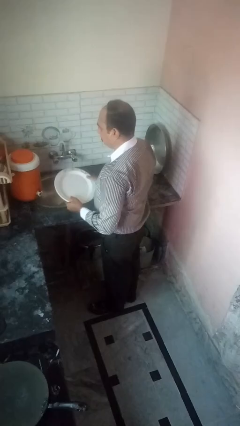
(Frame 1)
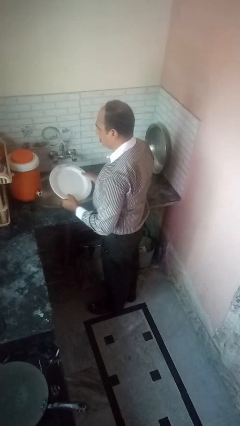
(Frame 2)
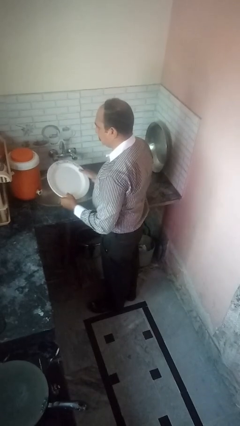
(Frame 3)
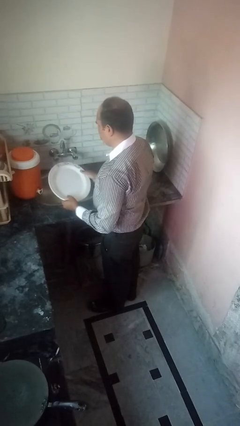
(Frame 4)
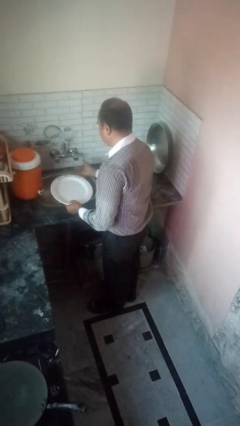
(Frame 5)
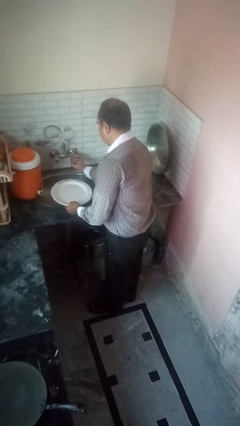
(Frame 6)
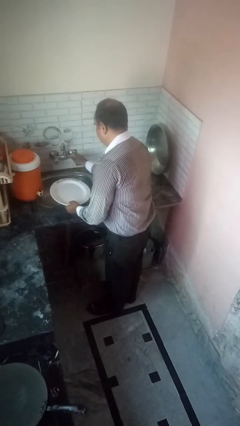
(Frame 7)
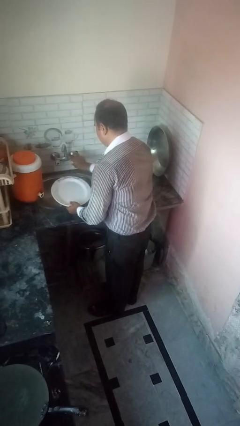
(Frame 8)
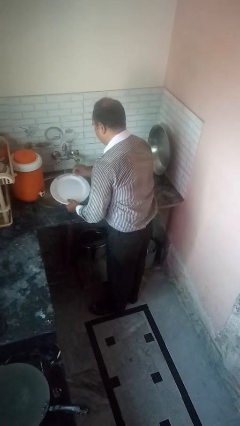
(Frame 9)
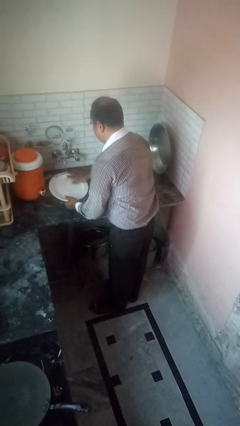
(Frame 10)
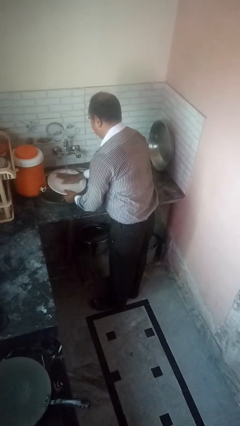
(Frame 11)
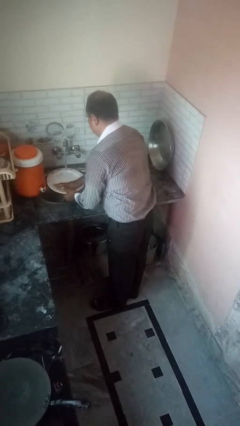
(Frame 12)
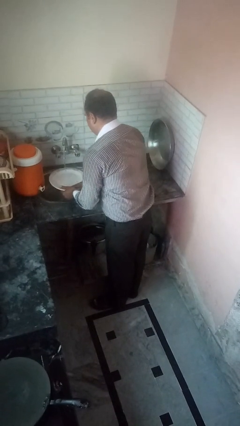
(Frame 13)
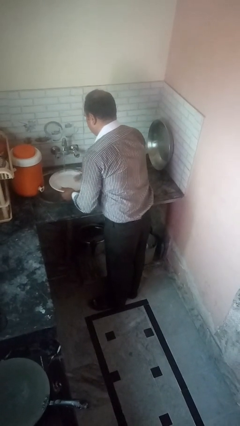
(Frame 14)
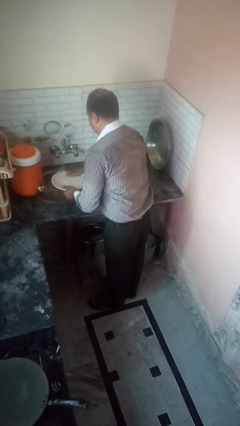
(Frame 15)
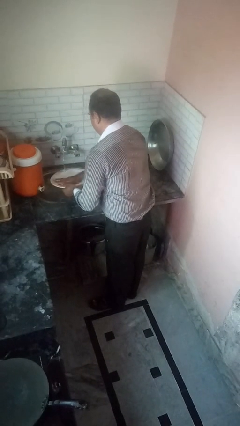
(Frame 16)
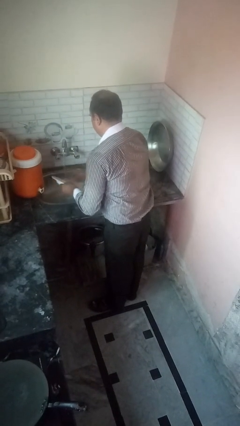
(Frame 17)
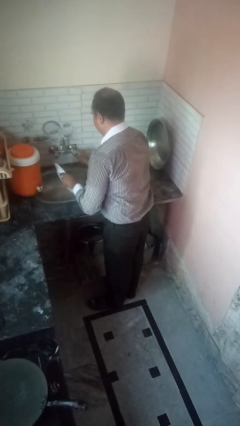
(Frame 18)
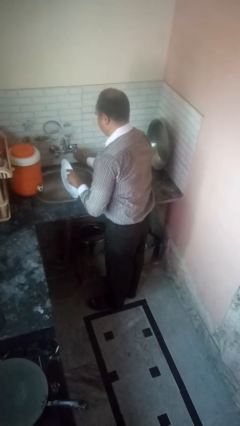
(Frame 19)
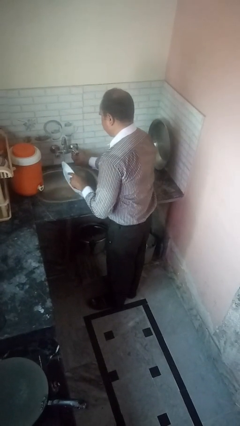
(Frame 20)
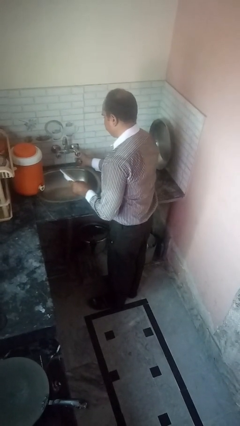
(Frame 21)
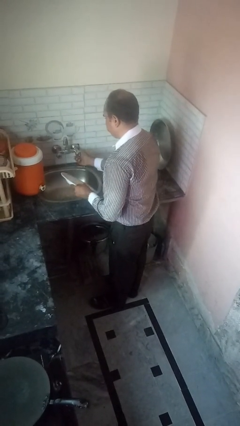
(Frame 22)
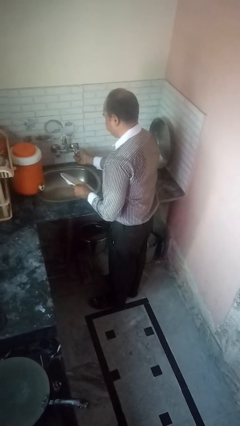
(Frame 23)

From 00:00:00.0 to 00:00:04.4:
person washes dish

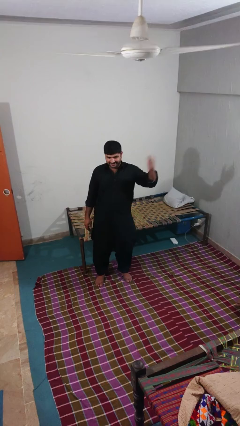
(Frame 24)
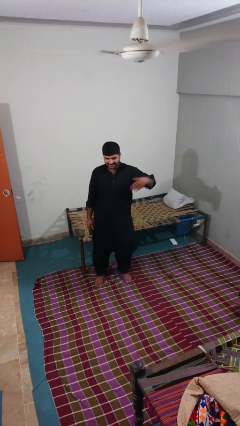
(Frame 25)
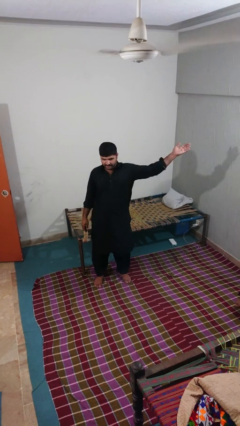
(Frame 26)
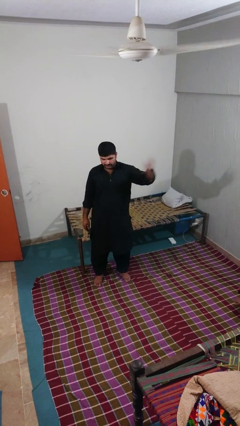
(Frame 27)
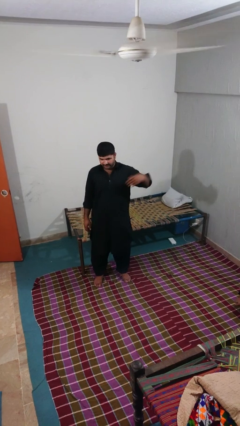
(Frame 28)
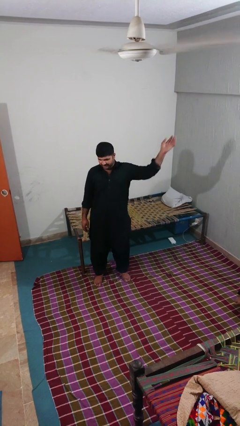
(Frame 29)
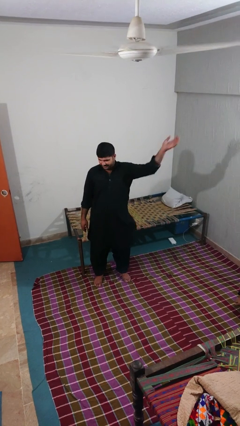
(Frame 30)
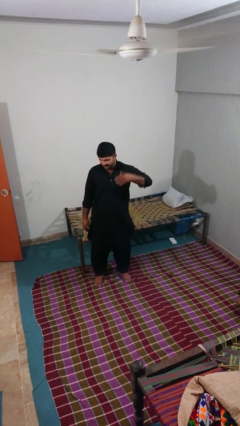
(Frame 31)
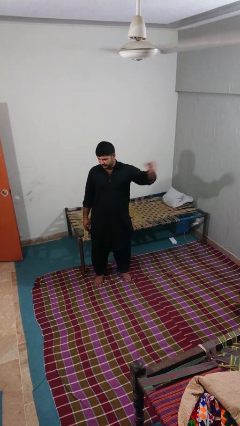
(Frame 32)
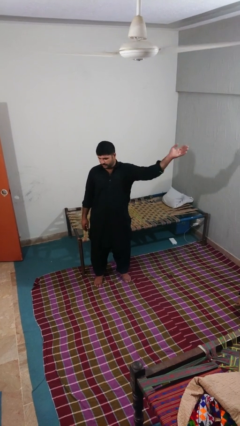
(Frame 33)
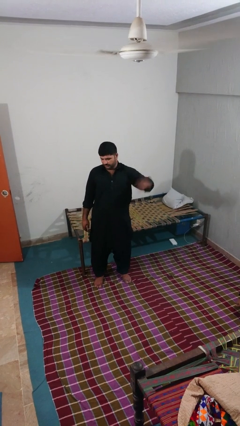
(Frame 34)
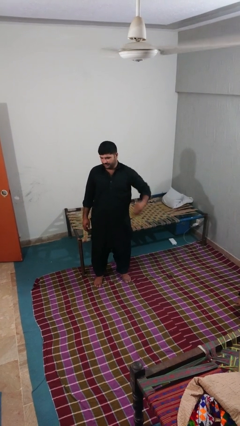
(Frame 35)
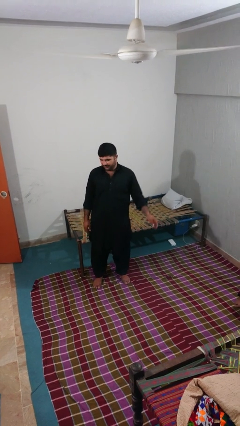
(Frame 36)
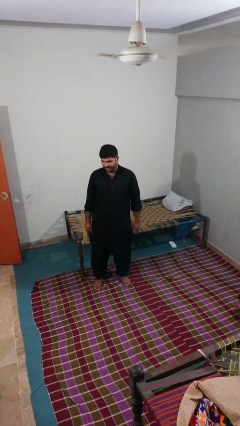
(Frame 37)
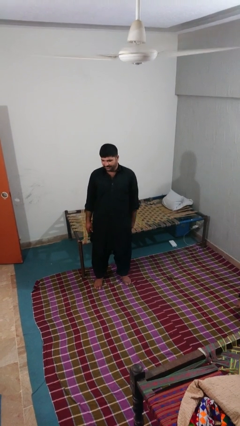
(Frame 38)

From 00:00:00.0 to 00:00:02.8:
person gestures come here

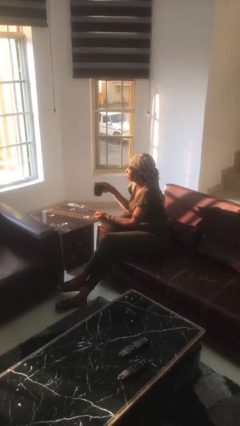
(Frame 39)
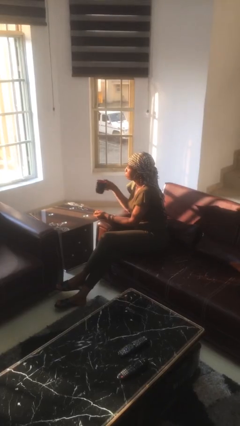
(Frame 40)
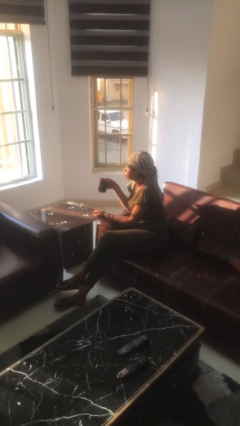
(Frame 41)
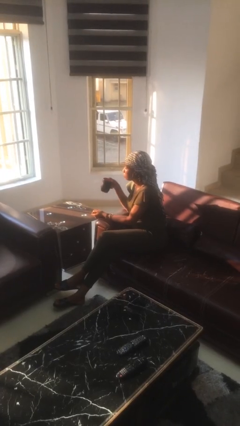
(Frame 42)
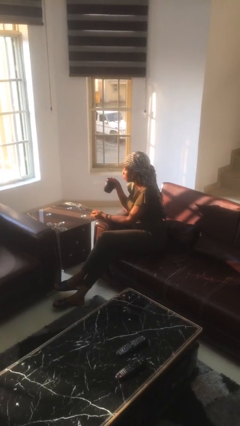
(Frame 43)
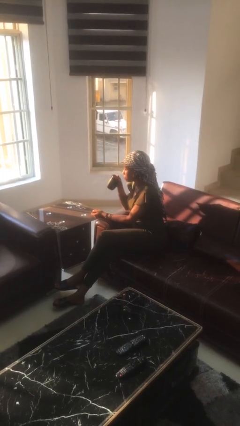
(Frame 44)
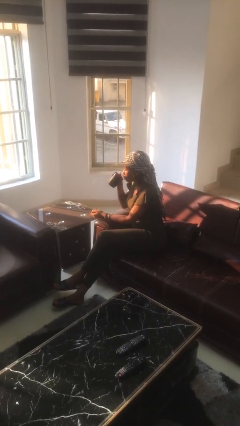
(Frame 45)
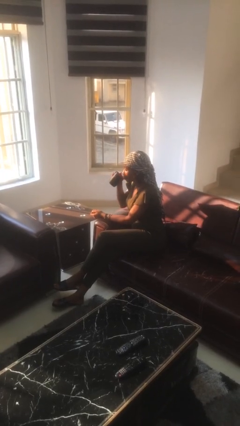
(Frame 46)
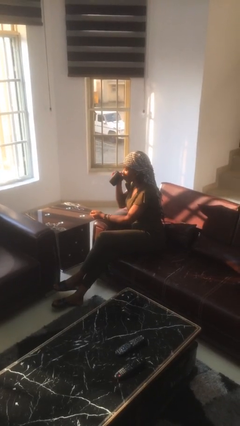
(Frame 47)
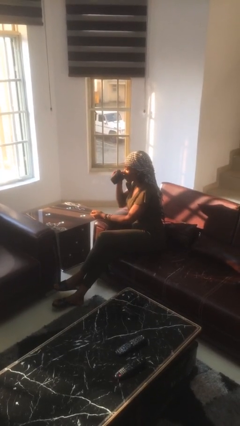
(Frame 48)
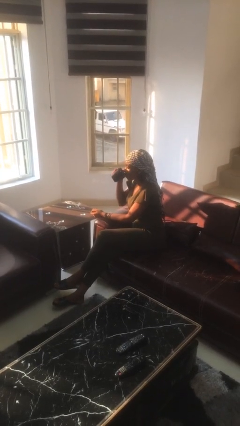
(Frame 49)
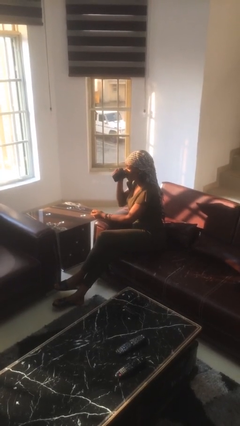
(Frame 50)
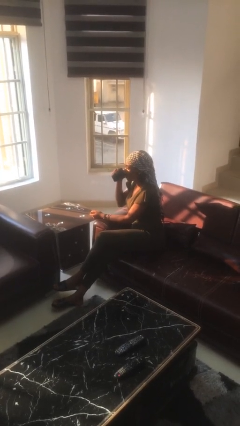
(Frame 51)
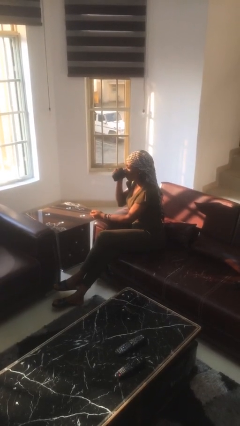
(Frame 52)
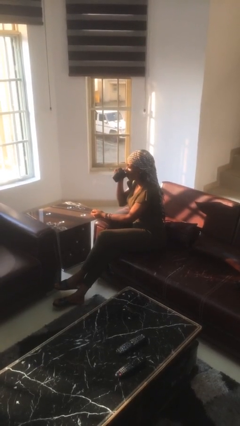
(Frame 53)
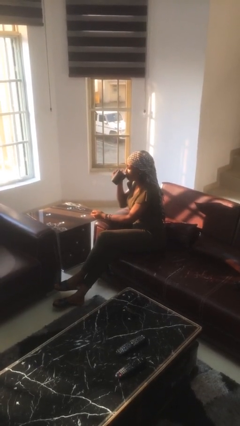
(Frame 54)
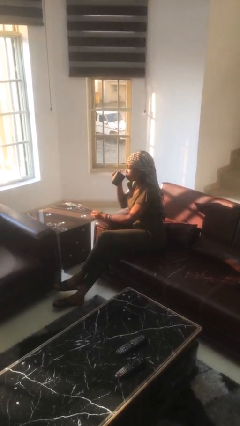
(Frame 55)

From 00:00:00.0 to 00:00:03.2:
person drinks from mug

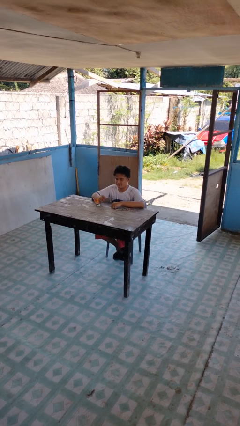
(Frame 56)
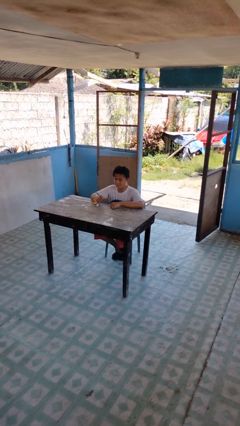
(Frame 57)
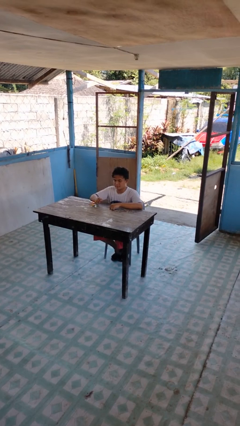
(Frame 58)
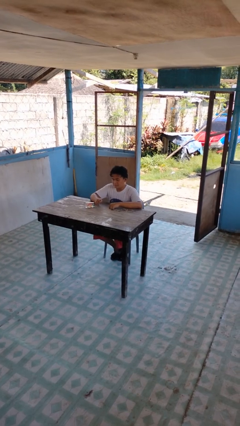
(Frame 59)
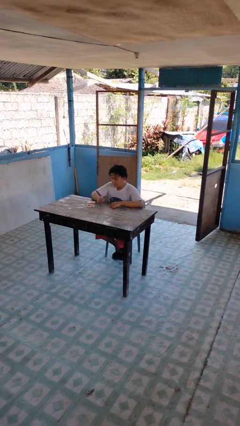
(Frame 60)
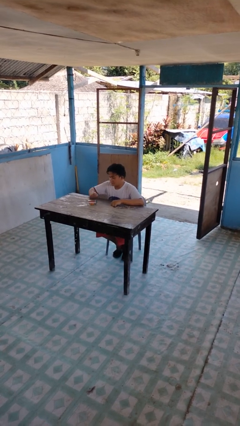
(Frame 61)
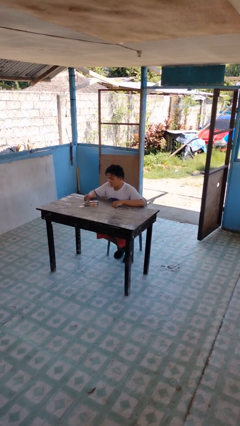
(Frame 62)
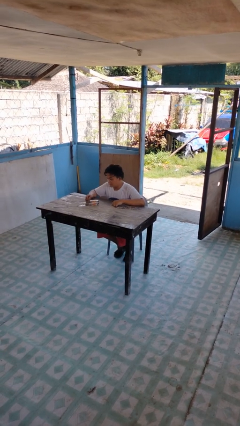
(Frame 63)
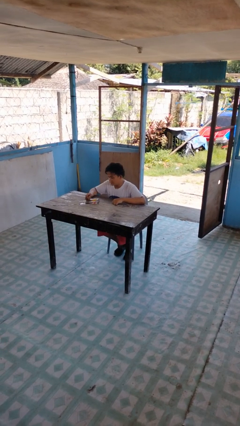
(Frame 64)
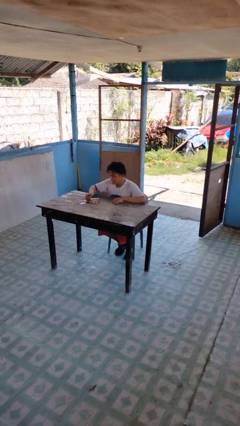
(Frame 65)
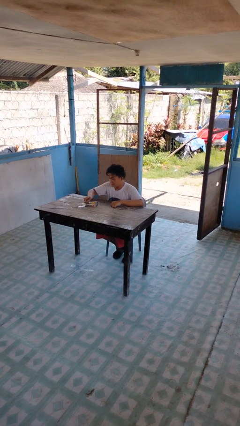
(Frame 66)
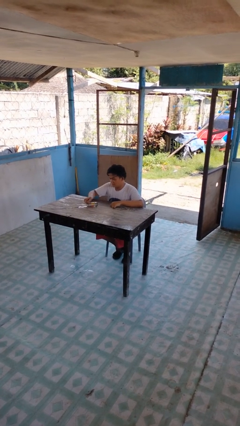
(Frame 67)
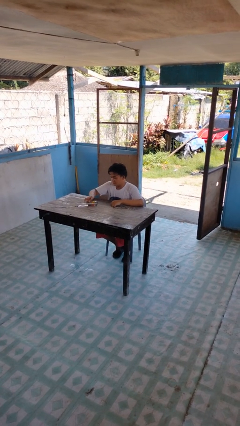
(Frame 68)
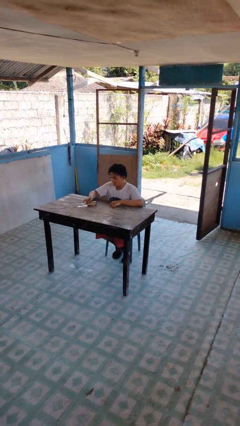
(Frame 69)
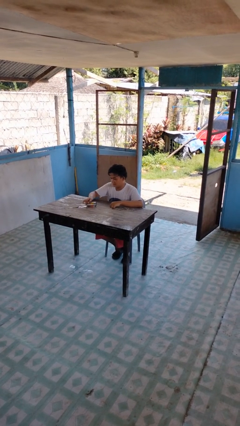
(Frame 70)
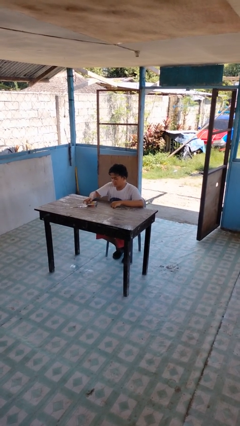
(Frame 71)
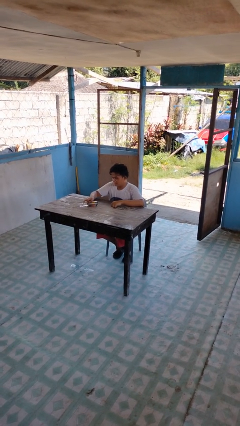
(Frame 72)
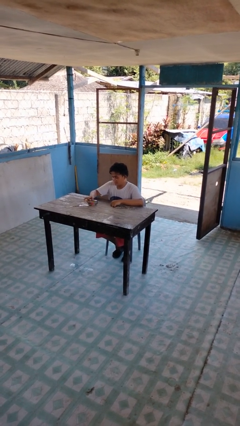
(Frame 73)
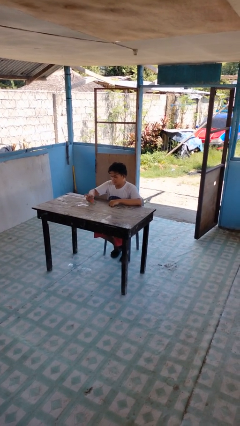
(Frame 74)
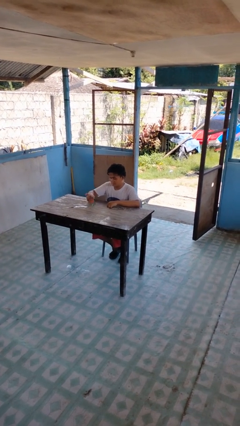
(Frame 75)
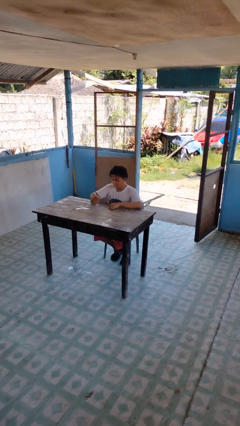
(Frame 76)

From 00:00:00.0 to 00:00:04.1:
person spills on table

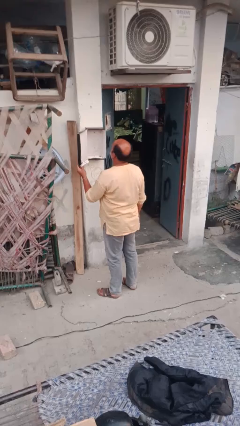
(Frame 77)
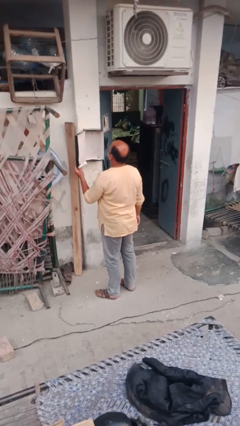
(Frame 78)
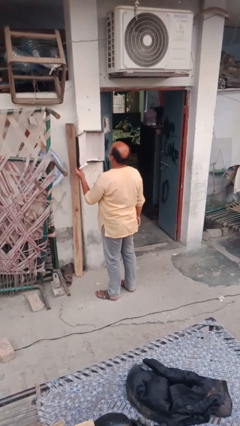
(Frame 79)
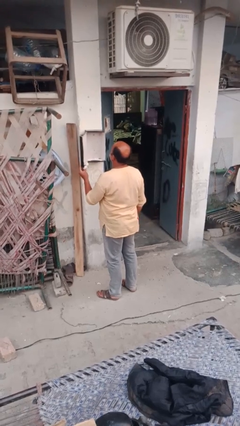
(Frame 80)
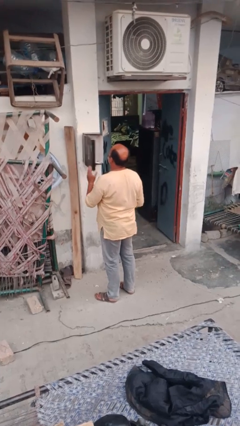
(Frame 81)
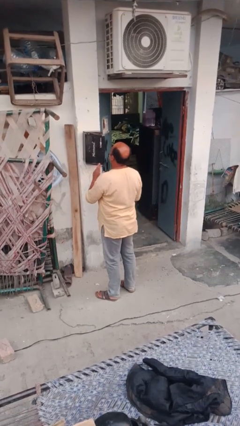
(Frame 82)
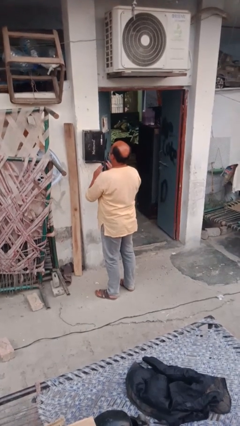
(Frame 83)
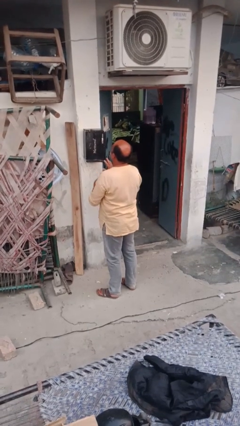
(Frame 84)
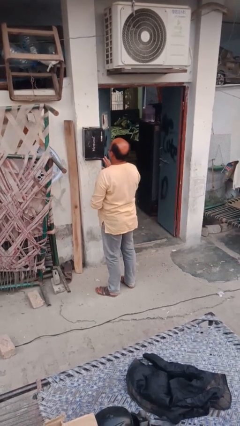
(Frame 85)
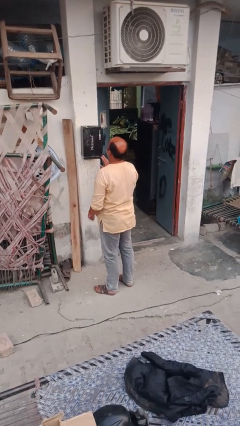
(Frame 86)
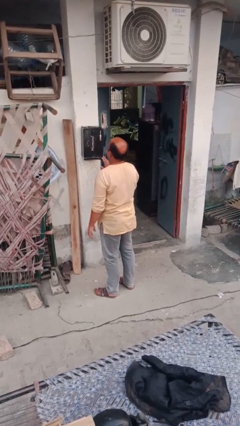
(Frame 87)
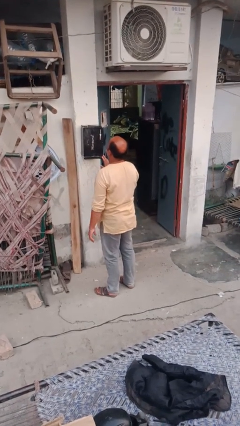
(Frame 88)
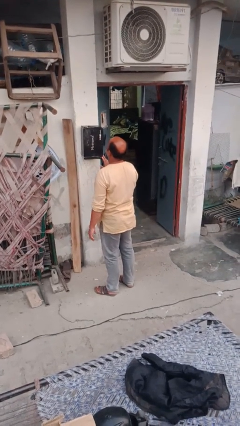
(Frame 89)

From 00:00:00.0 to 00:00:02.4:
person closes mailbox

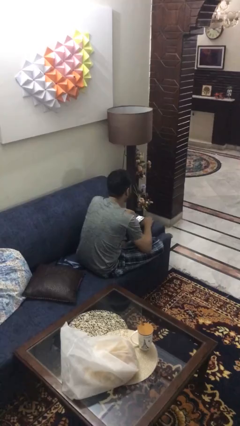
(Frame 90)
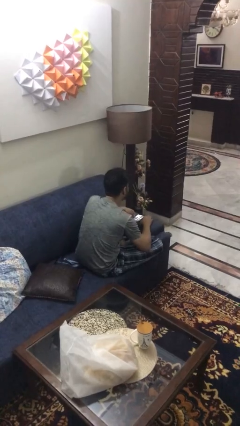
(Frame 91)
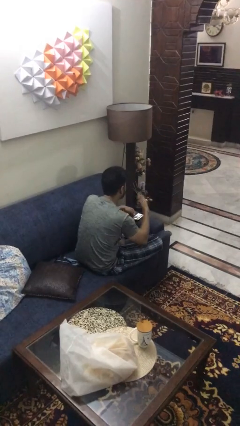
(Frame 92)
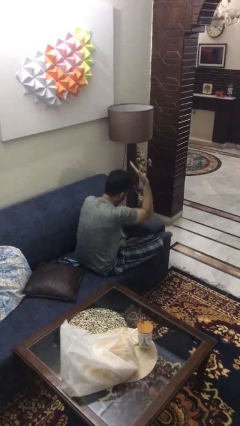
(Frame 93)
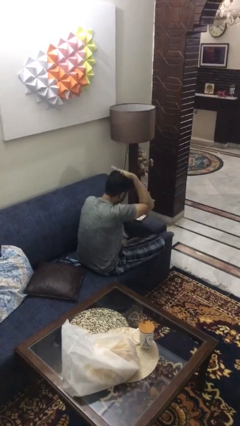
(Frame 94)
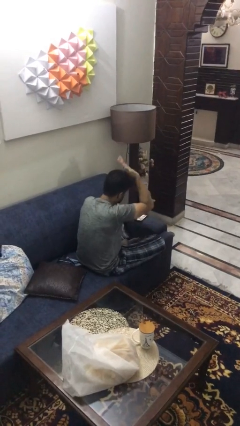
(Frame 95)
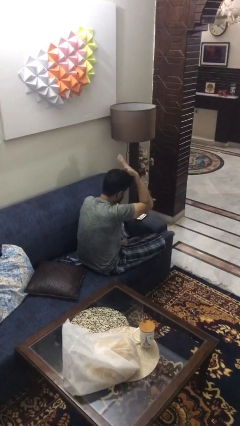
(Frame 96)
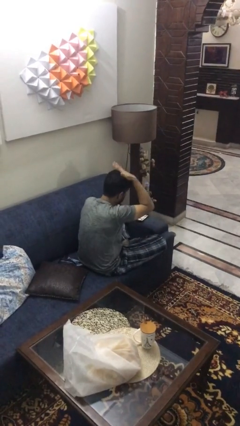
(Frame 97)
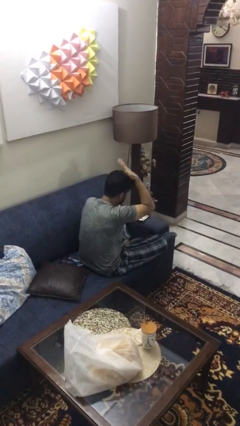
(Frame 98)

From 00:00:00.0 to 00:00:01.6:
person pats head
